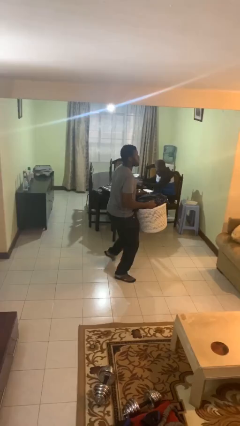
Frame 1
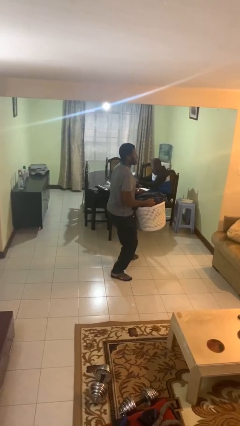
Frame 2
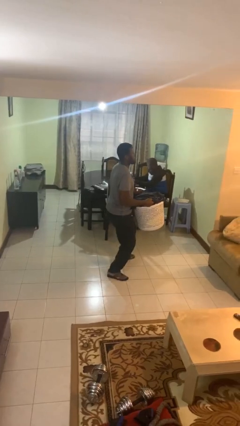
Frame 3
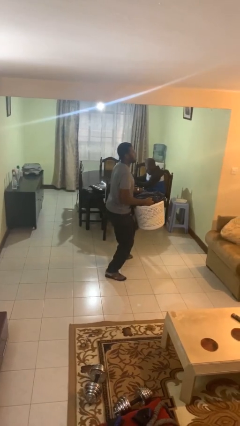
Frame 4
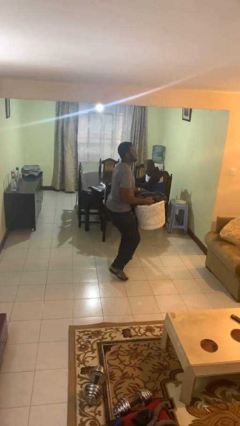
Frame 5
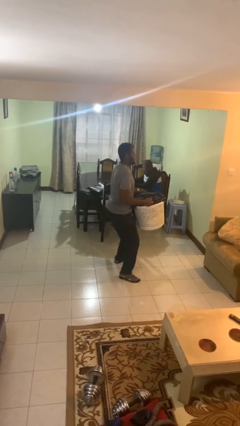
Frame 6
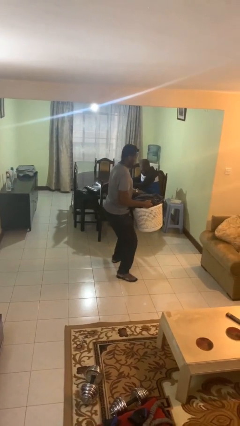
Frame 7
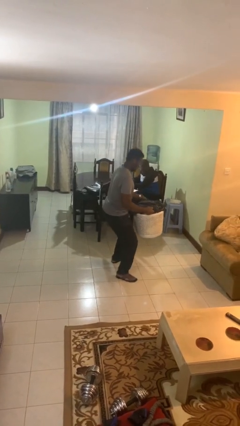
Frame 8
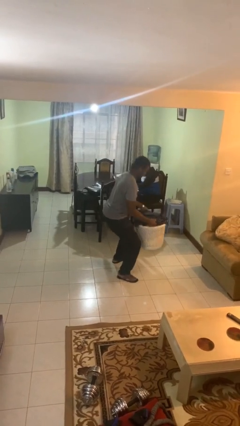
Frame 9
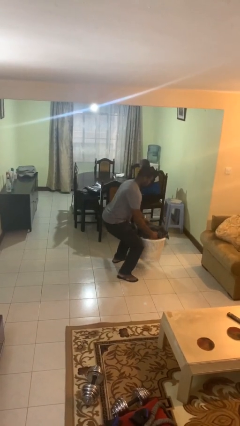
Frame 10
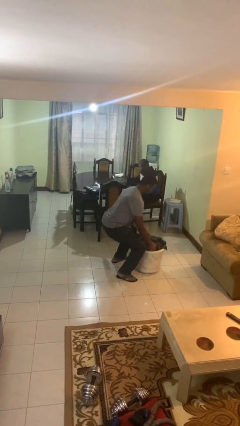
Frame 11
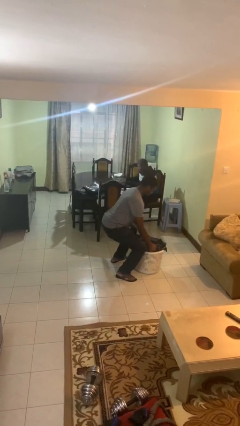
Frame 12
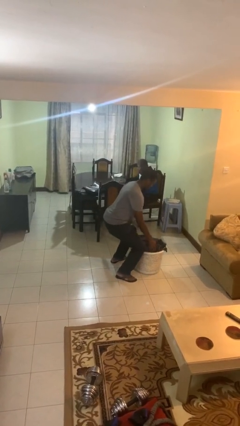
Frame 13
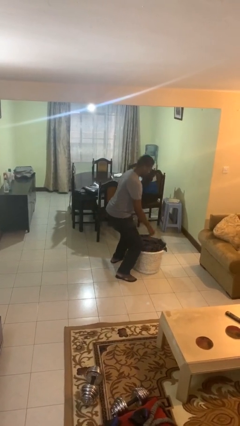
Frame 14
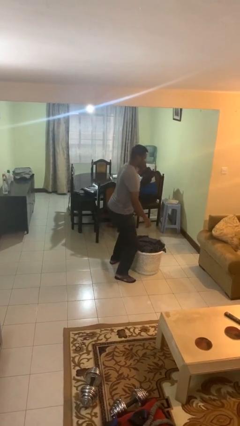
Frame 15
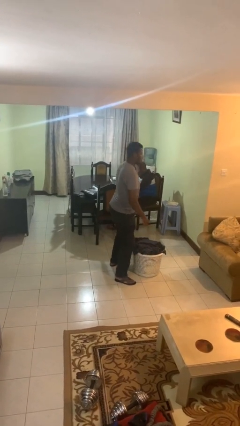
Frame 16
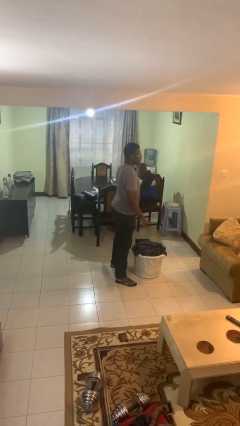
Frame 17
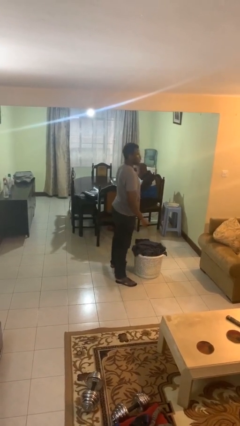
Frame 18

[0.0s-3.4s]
person puts down object on floor

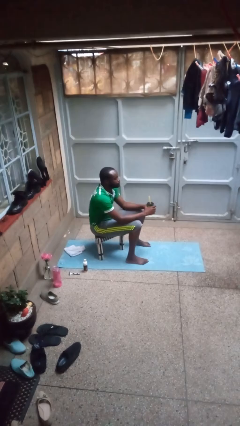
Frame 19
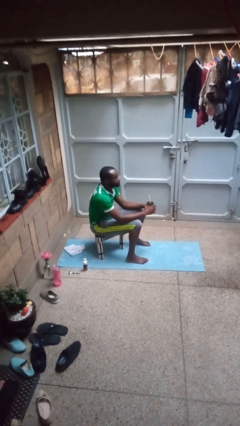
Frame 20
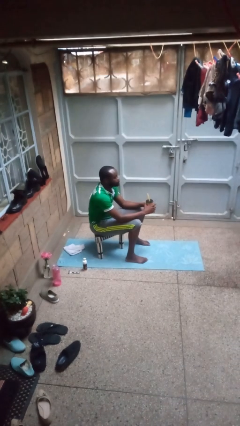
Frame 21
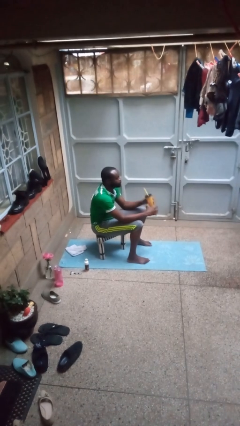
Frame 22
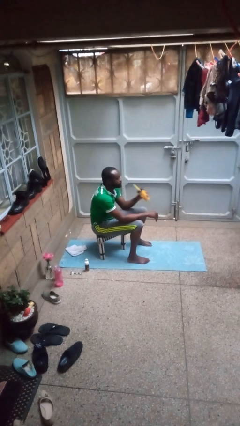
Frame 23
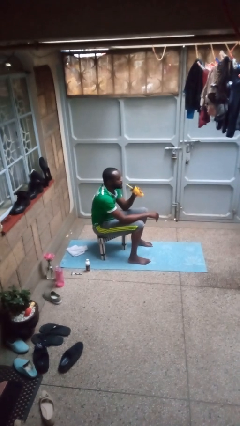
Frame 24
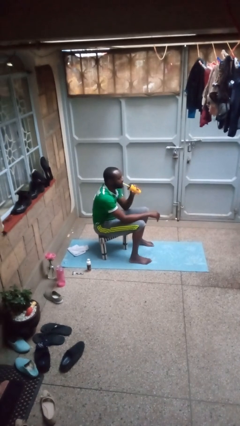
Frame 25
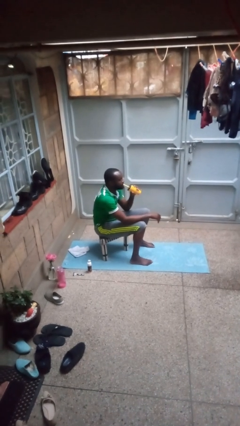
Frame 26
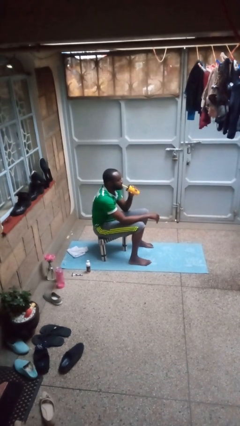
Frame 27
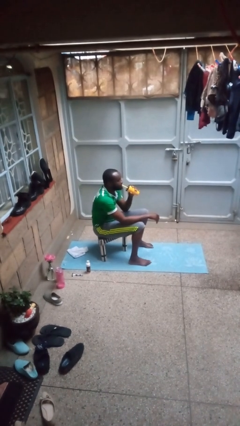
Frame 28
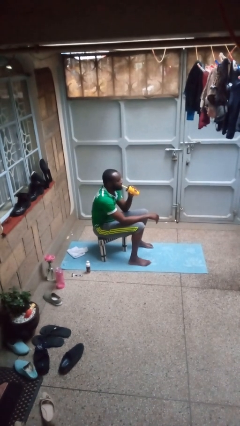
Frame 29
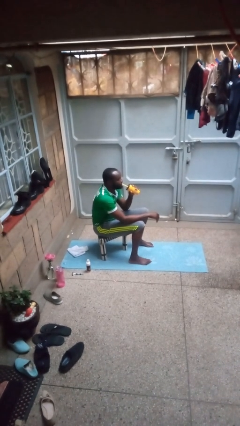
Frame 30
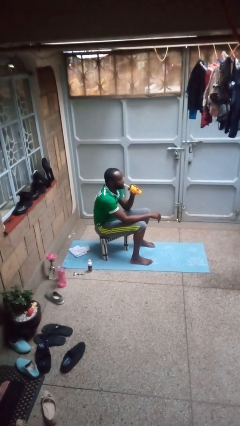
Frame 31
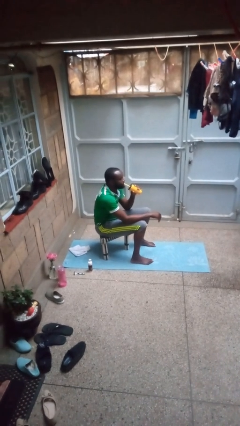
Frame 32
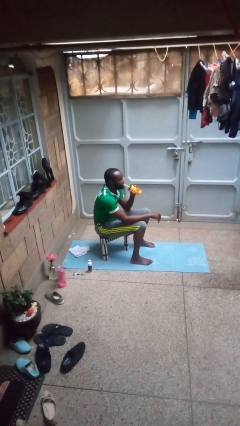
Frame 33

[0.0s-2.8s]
person drinks from straw

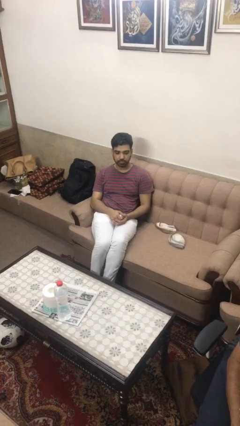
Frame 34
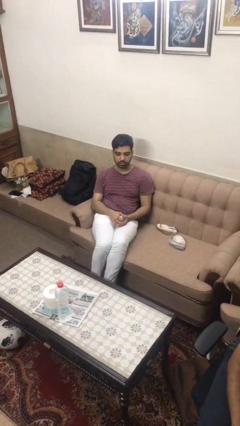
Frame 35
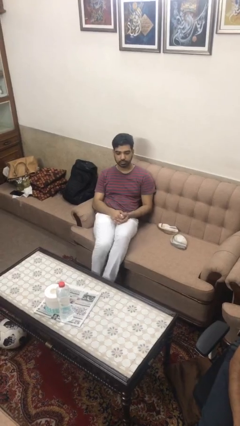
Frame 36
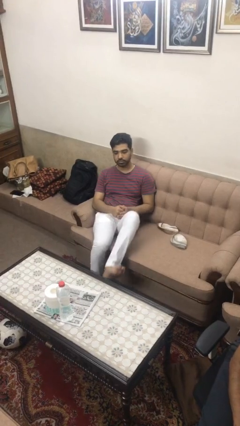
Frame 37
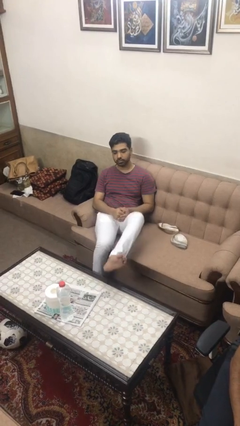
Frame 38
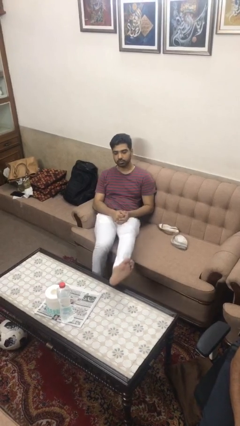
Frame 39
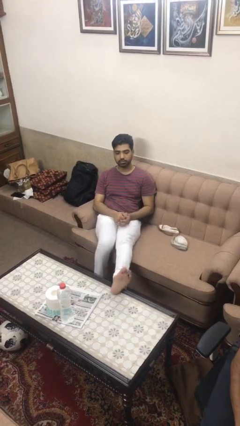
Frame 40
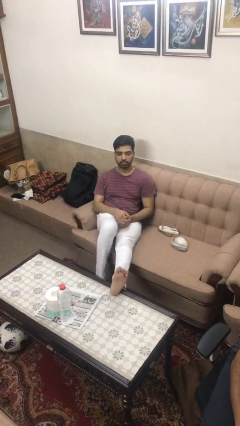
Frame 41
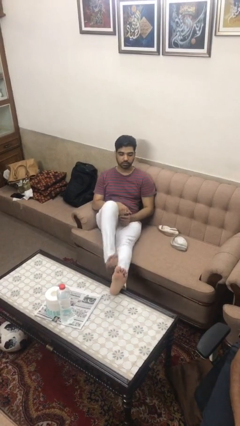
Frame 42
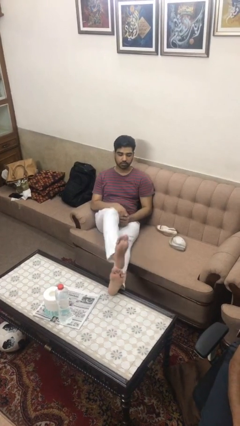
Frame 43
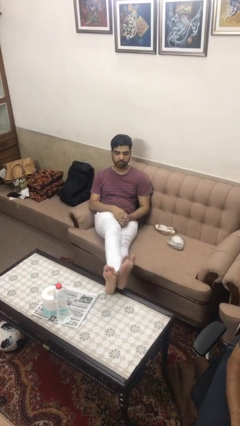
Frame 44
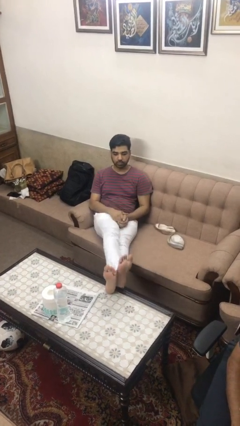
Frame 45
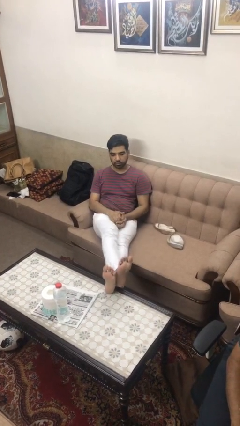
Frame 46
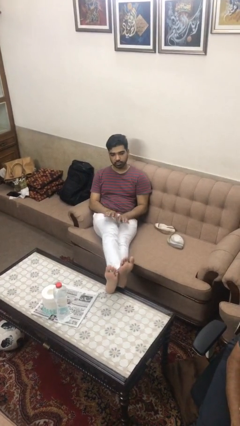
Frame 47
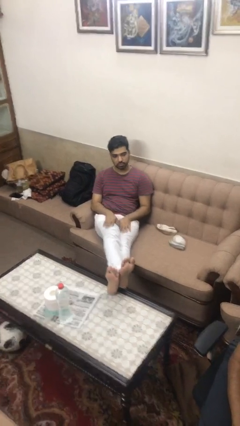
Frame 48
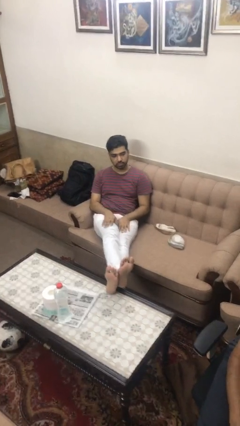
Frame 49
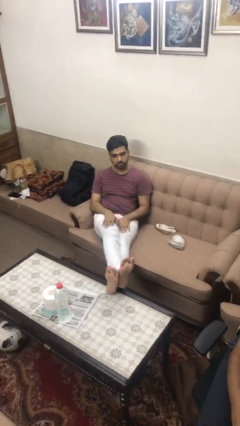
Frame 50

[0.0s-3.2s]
person puts feet up

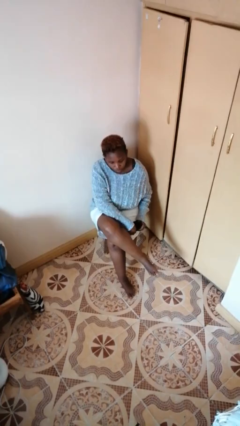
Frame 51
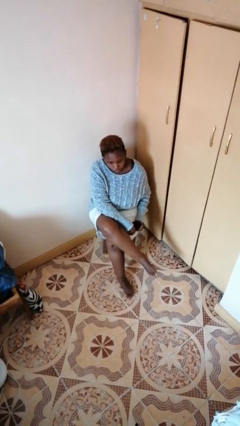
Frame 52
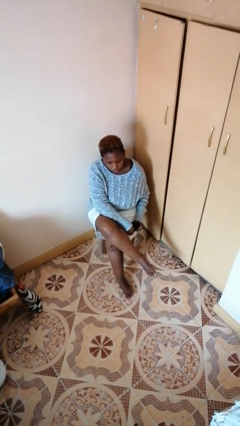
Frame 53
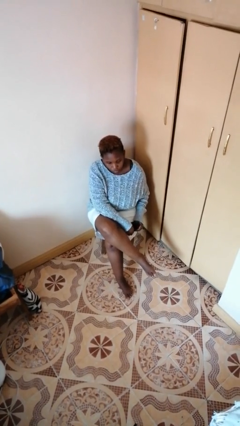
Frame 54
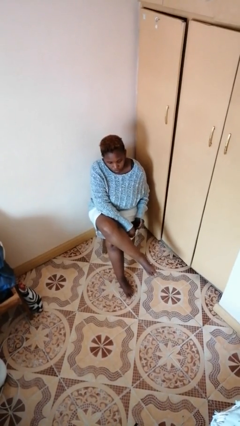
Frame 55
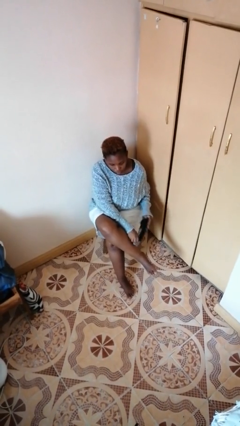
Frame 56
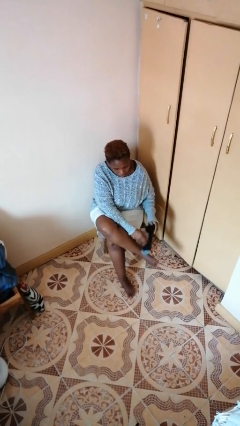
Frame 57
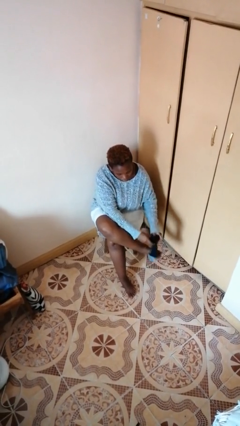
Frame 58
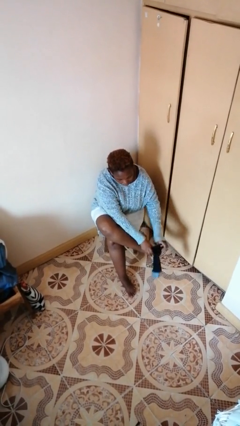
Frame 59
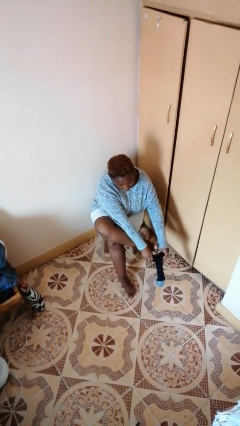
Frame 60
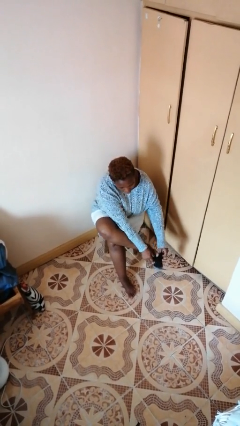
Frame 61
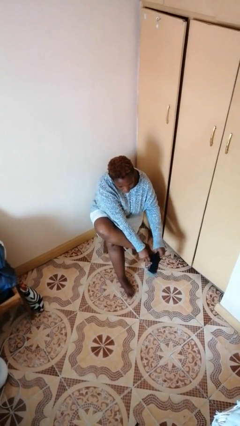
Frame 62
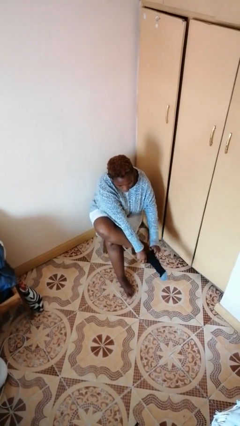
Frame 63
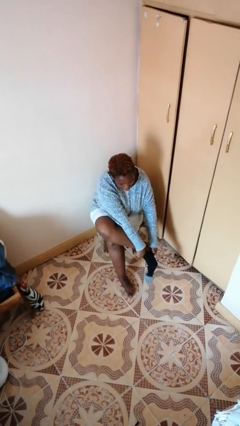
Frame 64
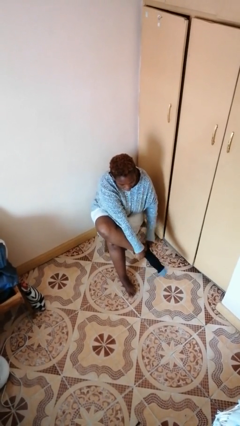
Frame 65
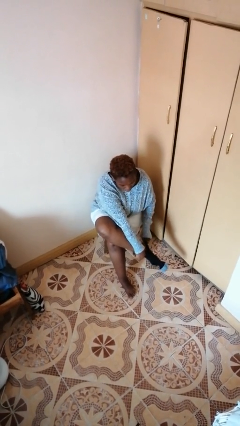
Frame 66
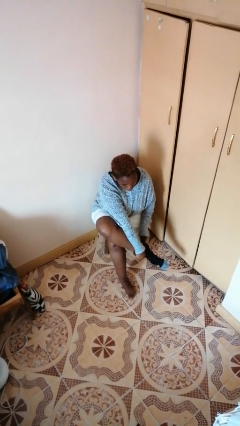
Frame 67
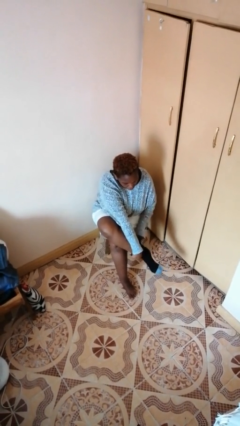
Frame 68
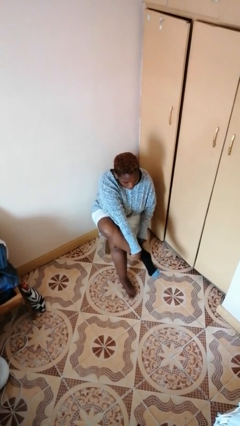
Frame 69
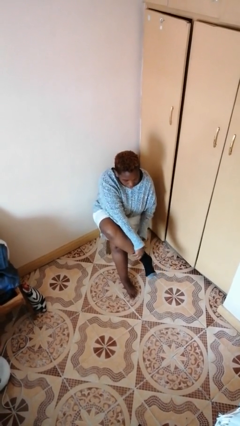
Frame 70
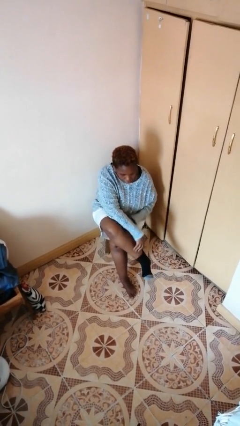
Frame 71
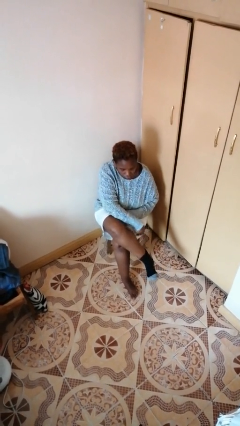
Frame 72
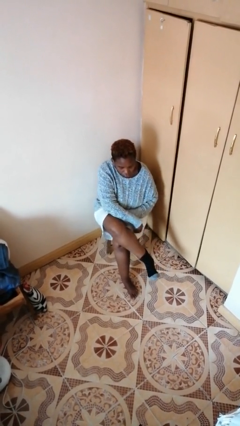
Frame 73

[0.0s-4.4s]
person puts on socks

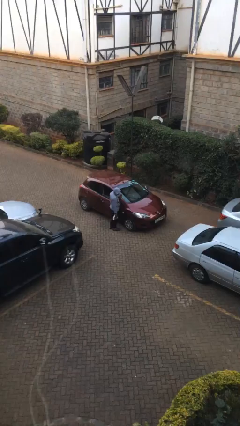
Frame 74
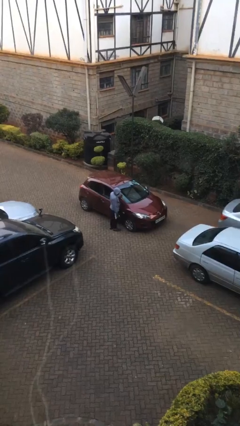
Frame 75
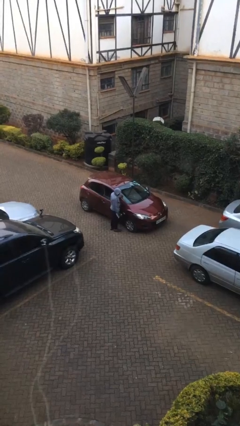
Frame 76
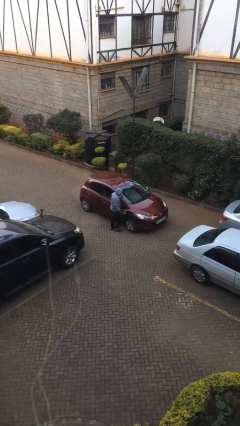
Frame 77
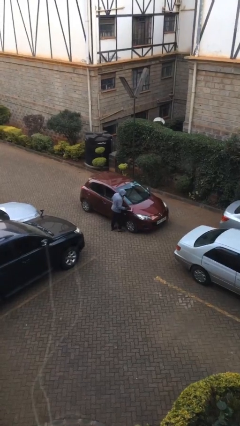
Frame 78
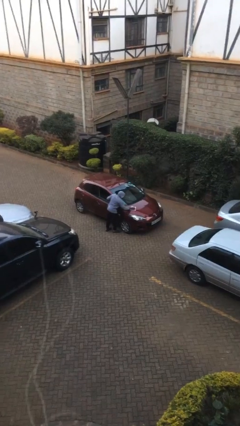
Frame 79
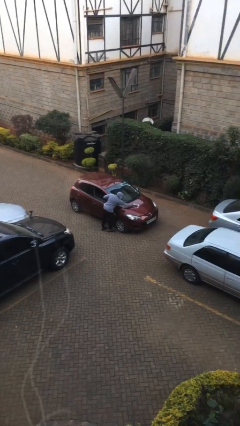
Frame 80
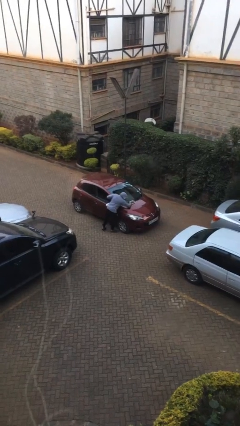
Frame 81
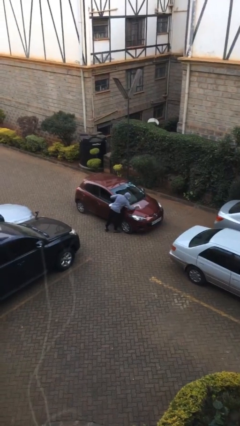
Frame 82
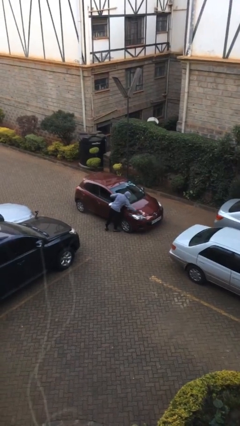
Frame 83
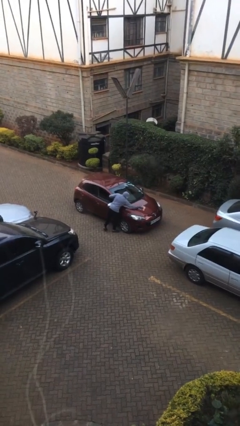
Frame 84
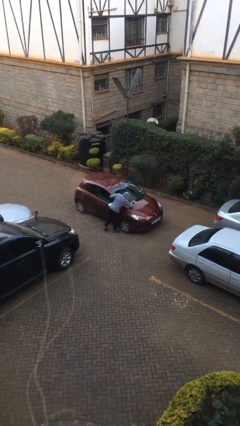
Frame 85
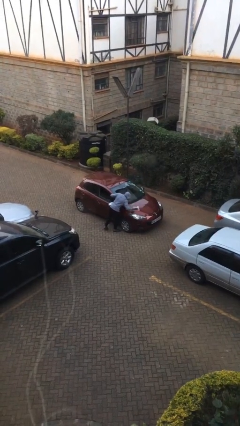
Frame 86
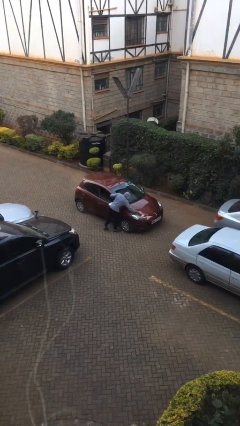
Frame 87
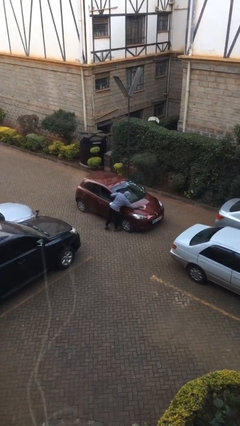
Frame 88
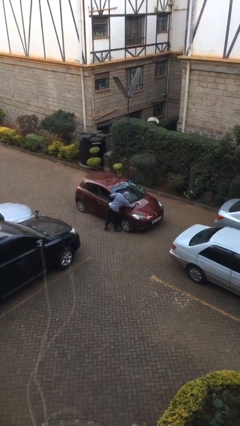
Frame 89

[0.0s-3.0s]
person polishes car with rag

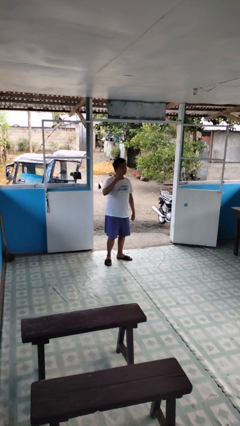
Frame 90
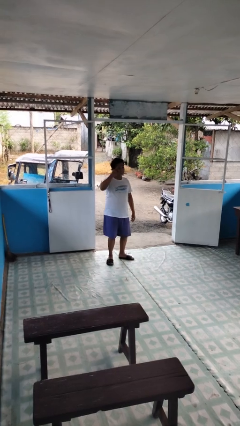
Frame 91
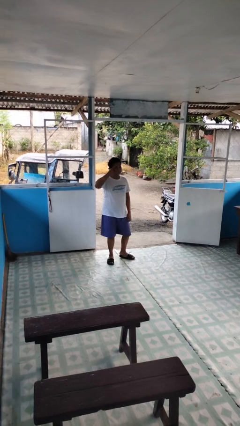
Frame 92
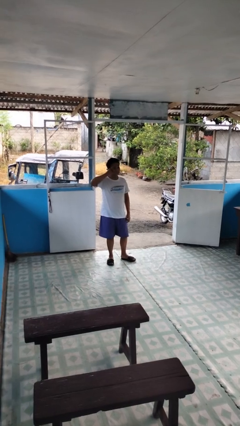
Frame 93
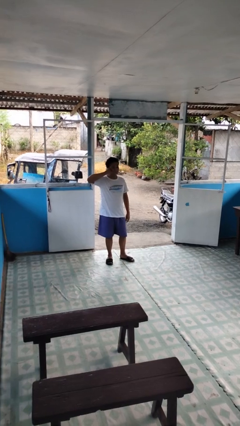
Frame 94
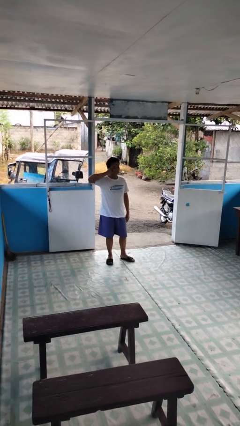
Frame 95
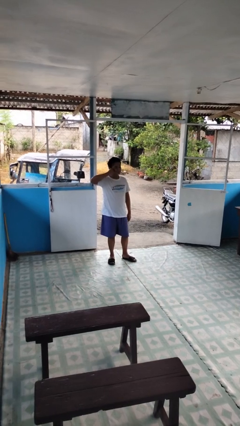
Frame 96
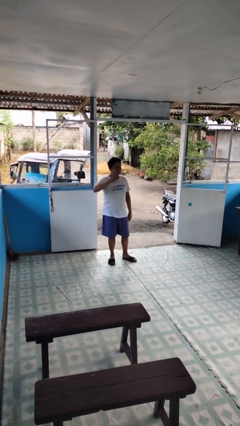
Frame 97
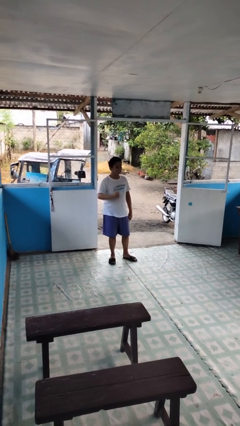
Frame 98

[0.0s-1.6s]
person gestures call me
